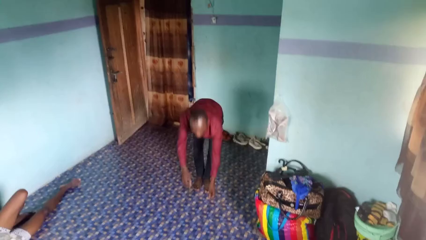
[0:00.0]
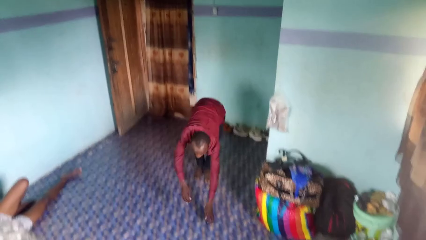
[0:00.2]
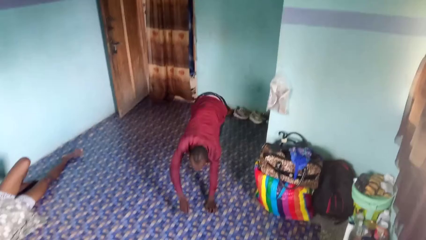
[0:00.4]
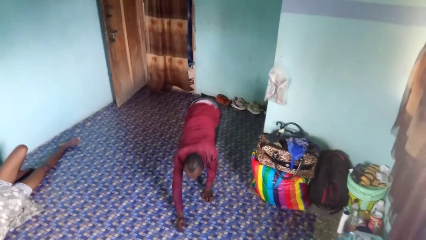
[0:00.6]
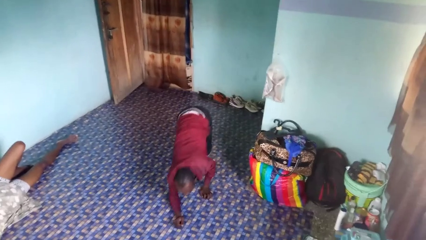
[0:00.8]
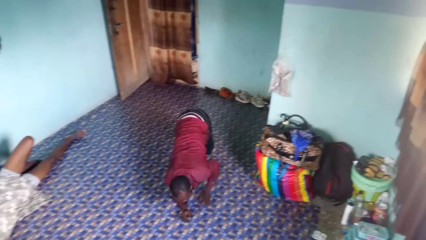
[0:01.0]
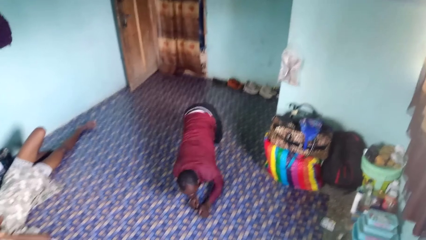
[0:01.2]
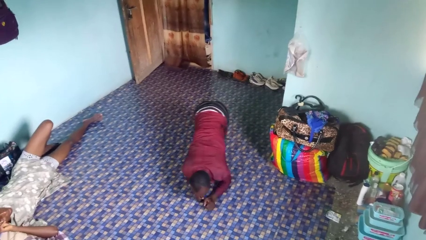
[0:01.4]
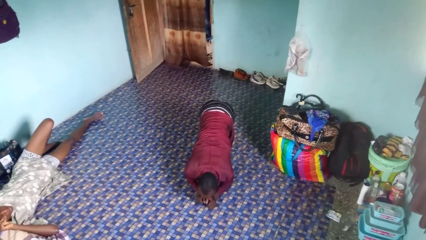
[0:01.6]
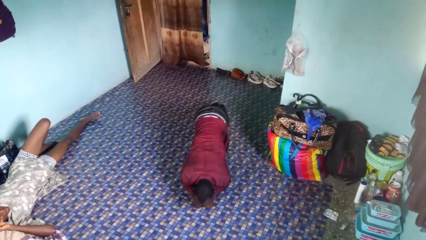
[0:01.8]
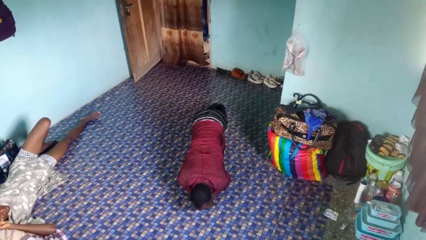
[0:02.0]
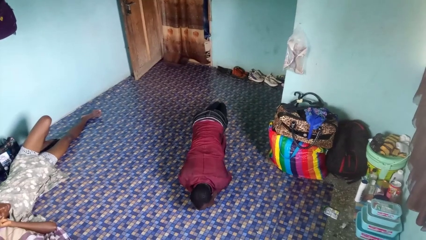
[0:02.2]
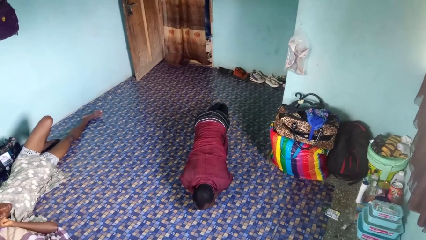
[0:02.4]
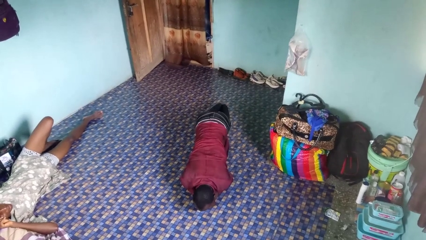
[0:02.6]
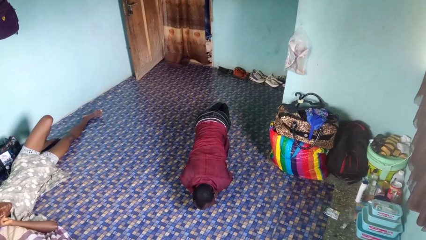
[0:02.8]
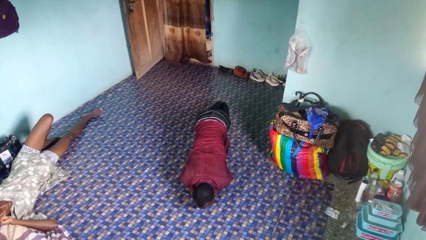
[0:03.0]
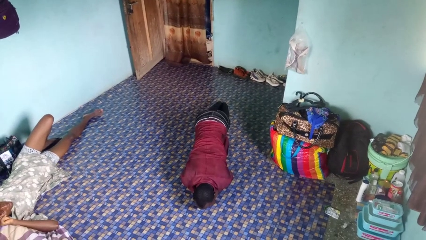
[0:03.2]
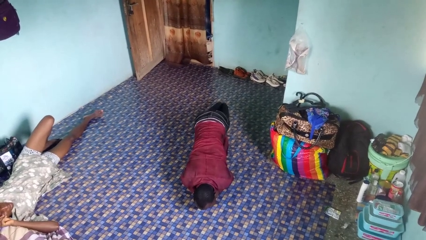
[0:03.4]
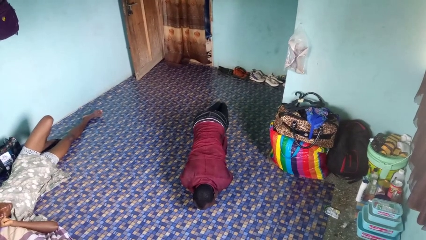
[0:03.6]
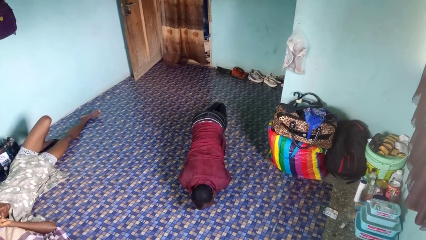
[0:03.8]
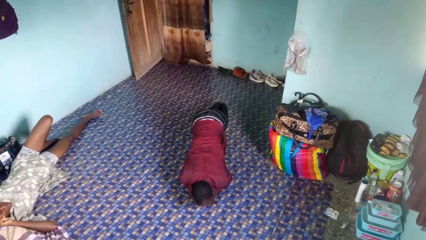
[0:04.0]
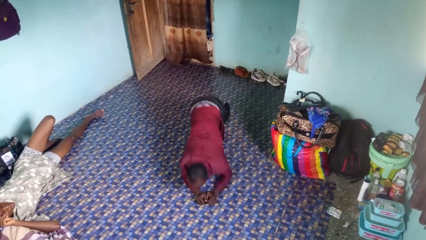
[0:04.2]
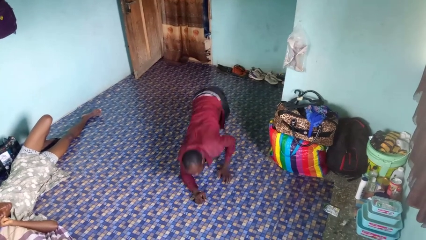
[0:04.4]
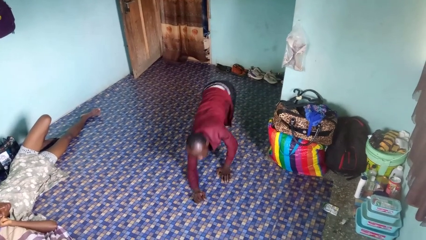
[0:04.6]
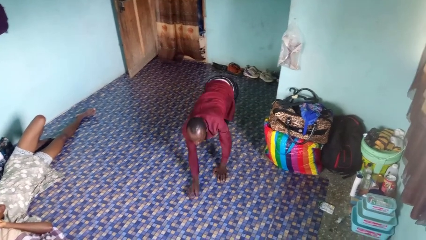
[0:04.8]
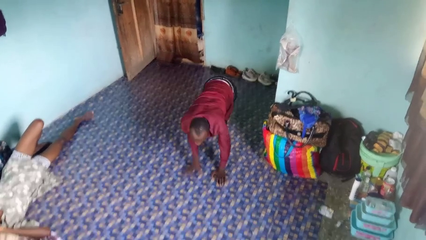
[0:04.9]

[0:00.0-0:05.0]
person exercises with plank

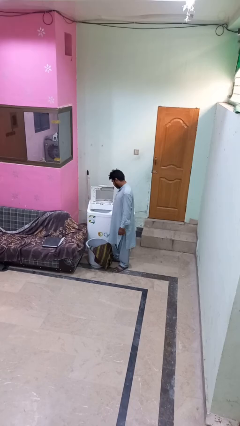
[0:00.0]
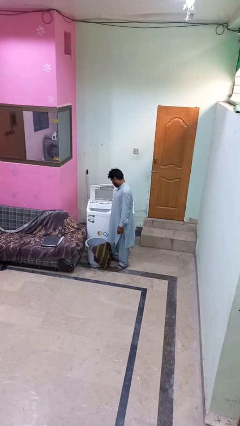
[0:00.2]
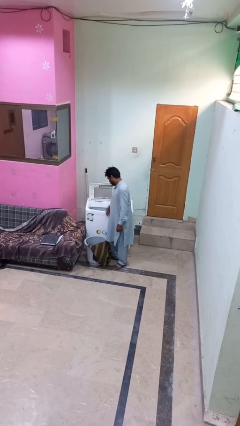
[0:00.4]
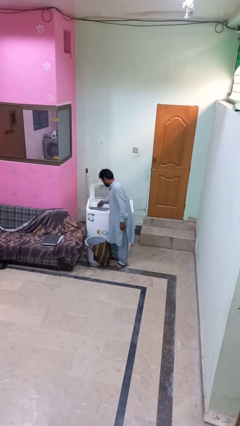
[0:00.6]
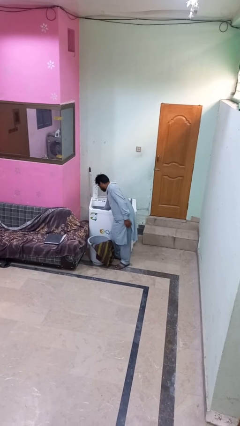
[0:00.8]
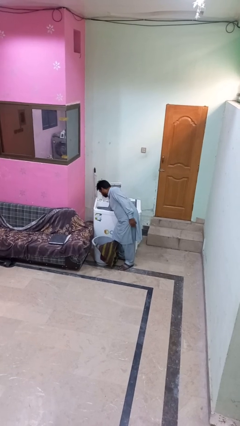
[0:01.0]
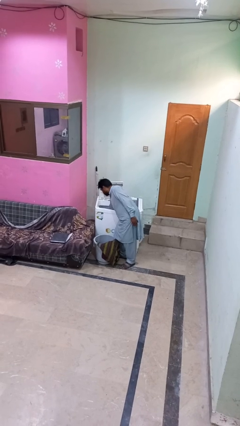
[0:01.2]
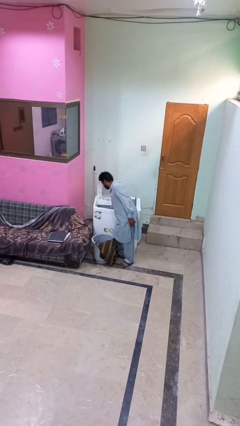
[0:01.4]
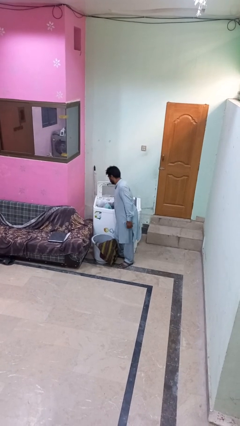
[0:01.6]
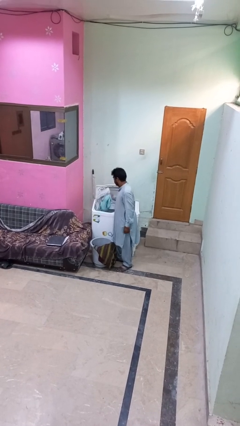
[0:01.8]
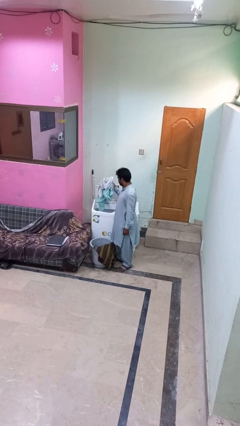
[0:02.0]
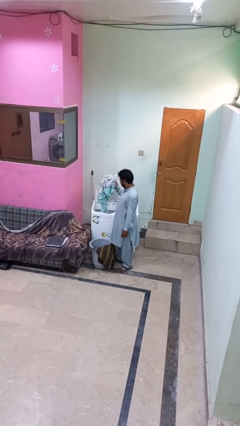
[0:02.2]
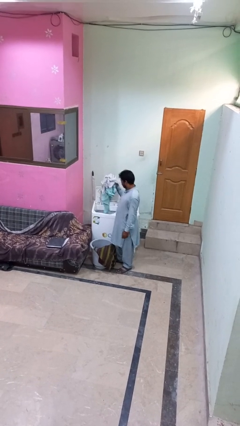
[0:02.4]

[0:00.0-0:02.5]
person unloads clotheswasher

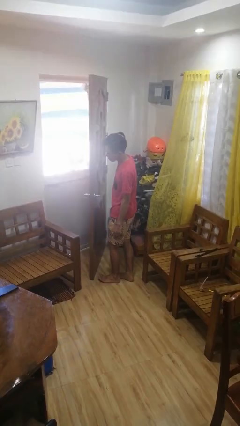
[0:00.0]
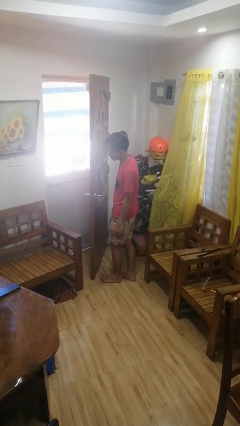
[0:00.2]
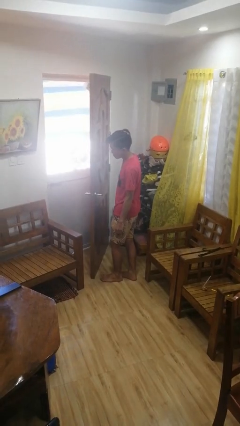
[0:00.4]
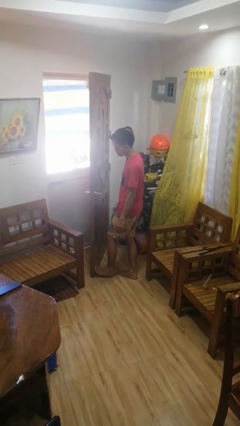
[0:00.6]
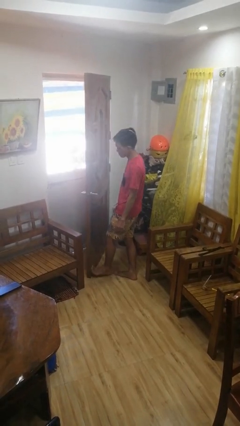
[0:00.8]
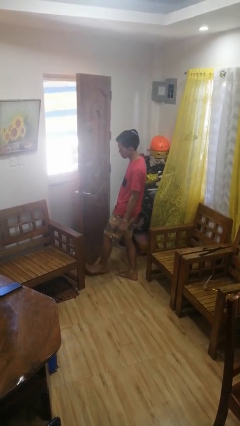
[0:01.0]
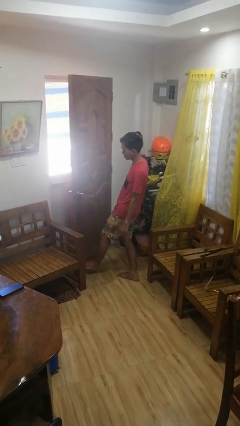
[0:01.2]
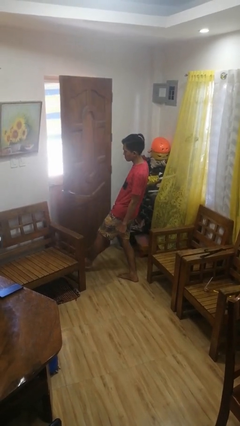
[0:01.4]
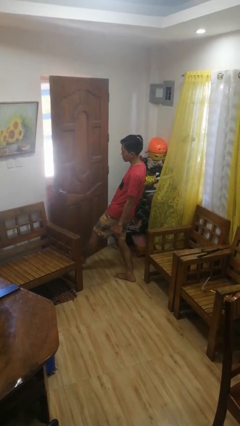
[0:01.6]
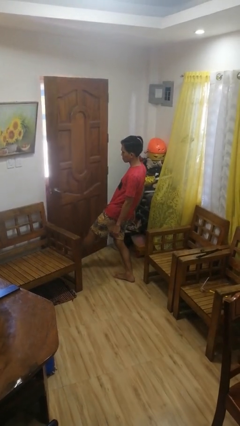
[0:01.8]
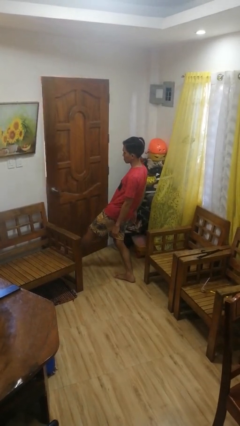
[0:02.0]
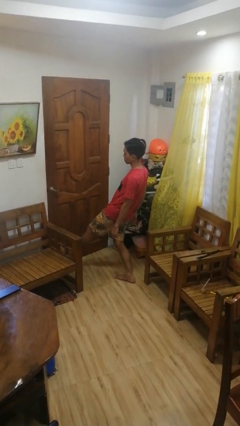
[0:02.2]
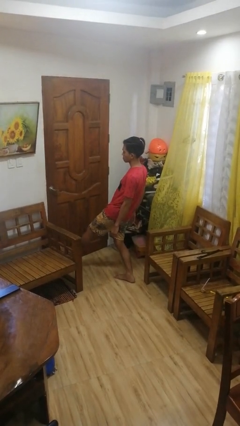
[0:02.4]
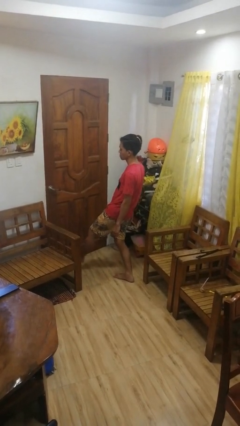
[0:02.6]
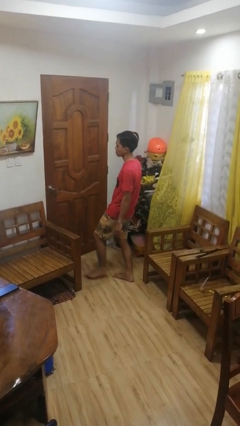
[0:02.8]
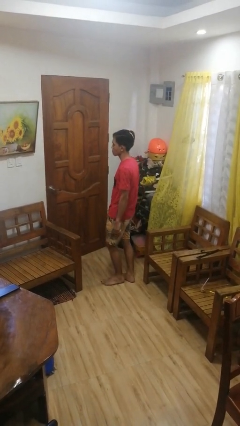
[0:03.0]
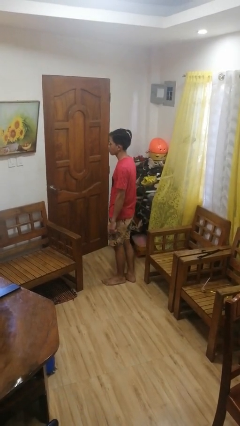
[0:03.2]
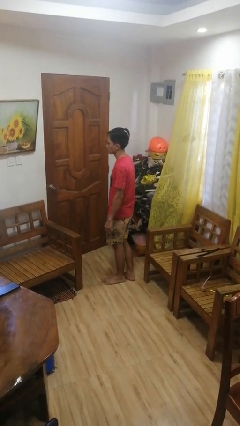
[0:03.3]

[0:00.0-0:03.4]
person closes door with foot

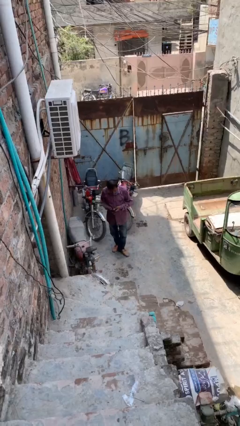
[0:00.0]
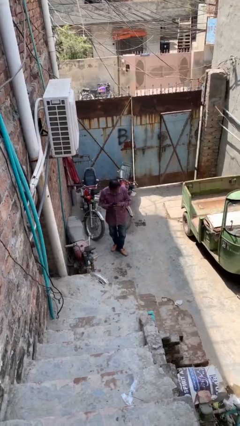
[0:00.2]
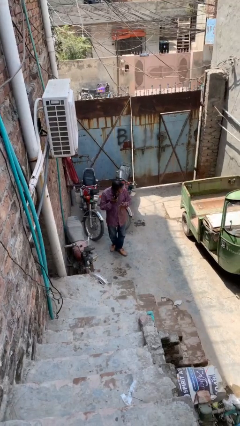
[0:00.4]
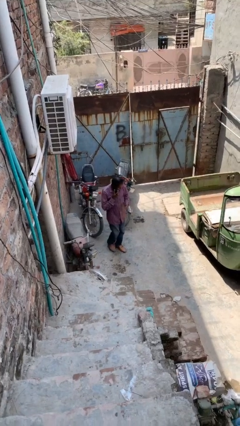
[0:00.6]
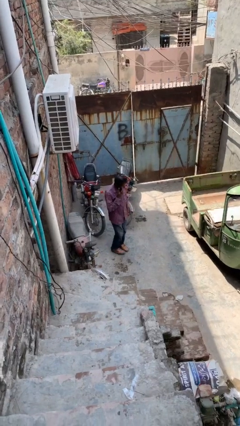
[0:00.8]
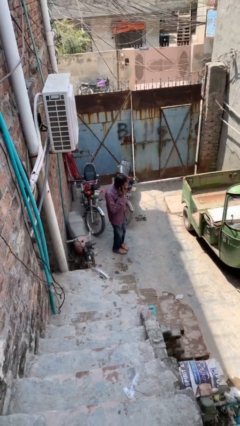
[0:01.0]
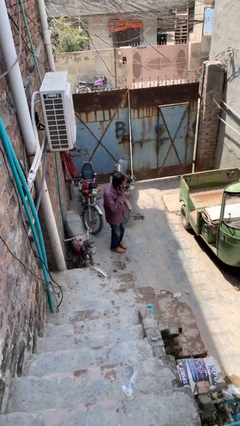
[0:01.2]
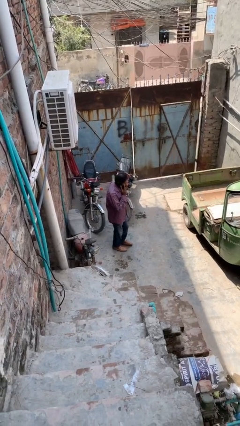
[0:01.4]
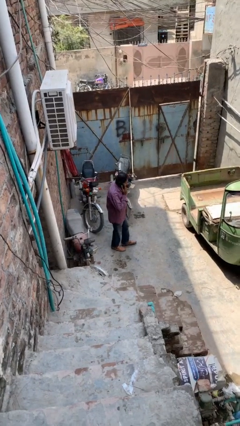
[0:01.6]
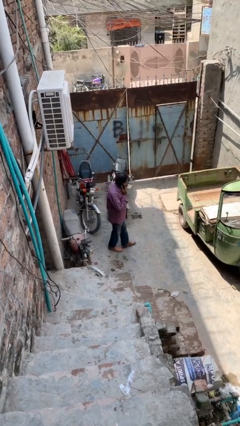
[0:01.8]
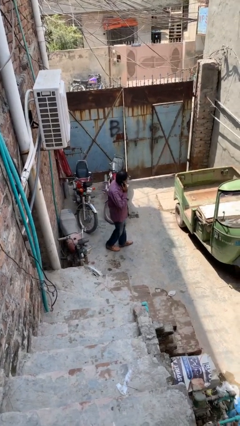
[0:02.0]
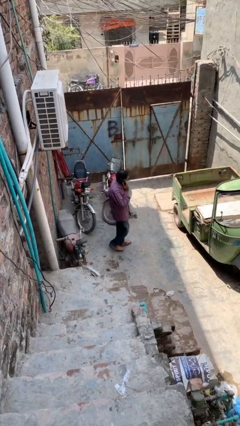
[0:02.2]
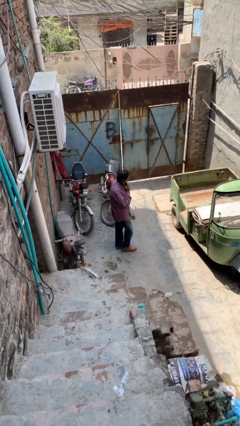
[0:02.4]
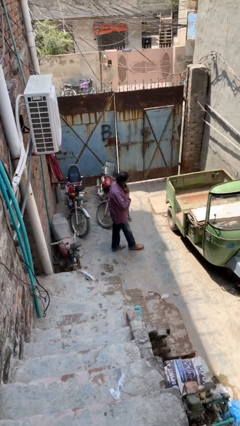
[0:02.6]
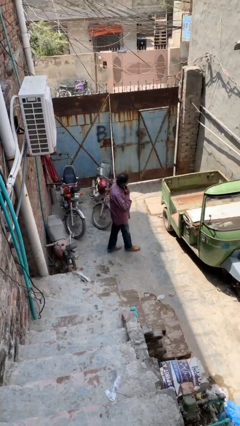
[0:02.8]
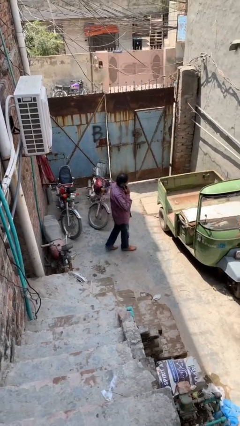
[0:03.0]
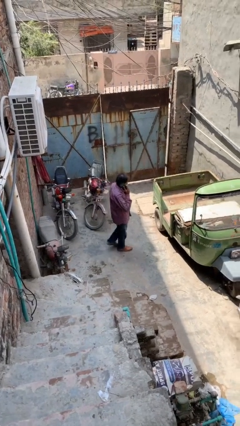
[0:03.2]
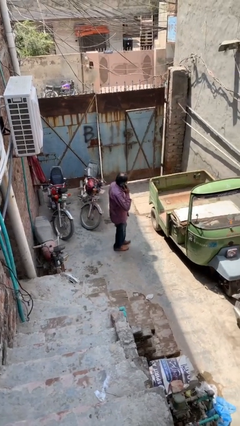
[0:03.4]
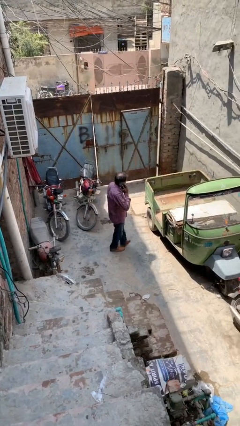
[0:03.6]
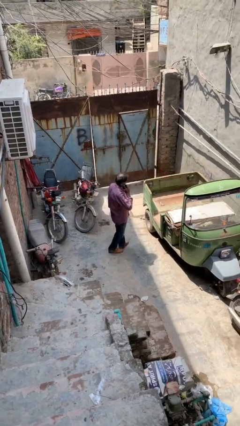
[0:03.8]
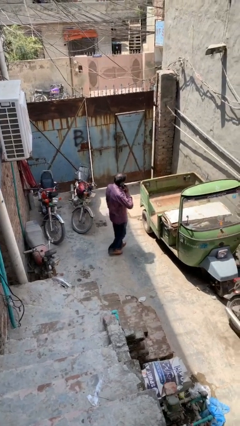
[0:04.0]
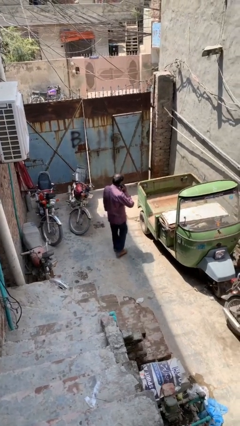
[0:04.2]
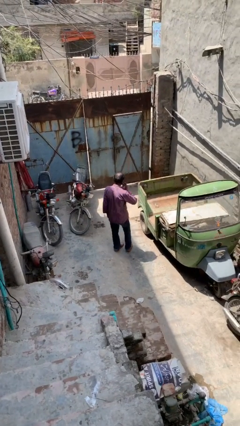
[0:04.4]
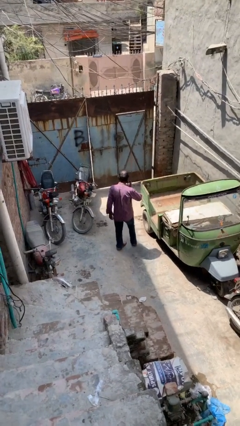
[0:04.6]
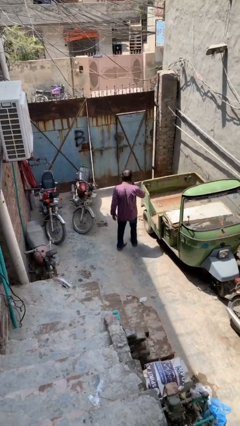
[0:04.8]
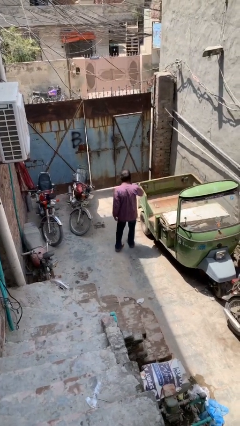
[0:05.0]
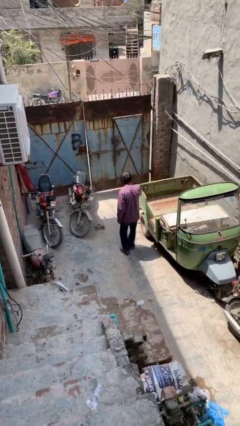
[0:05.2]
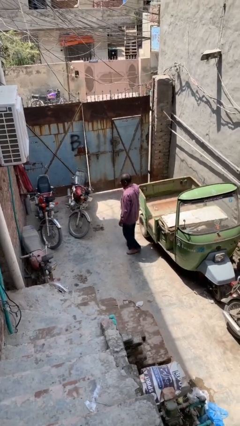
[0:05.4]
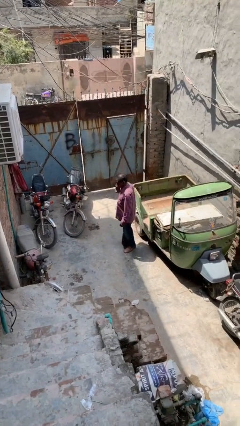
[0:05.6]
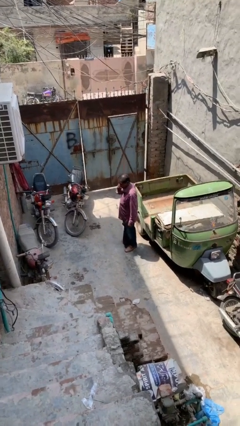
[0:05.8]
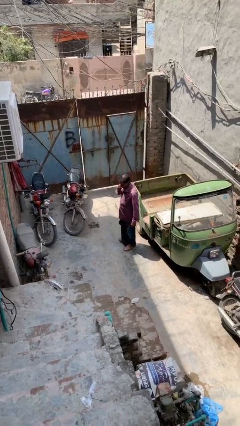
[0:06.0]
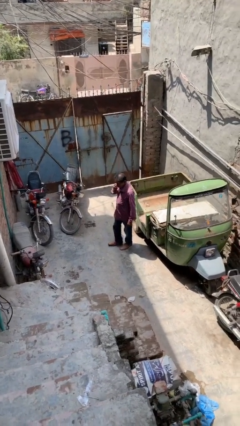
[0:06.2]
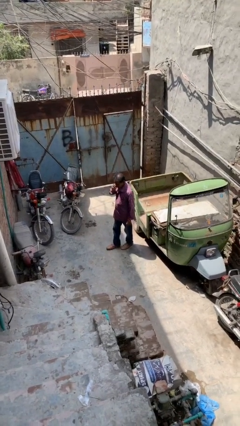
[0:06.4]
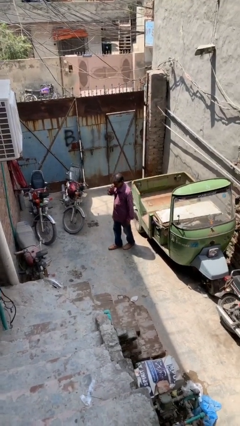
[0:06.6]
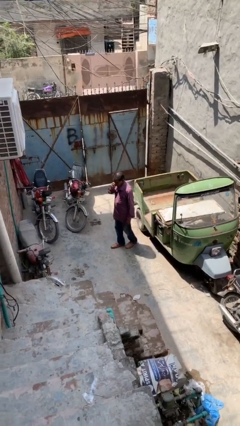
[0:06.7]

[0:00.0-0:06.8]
person talks on phone
